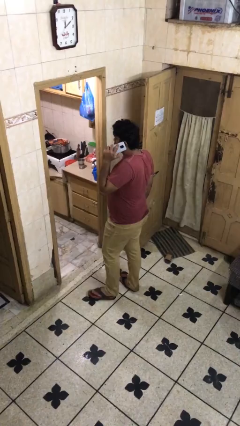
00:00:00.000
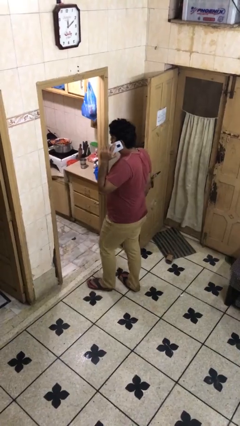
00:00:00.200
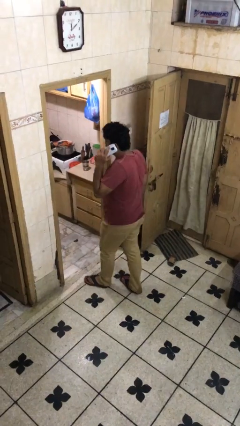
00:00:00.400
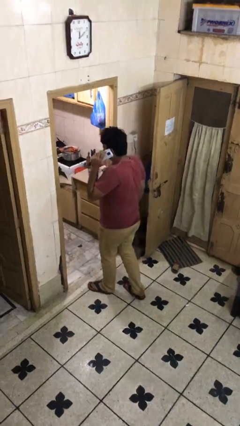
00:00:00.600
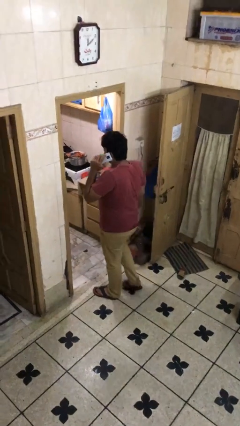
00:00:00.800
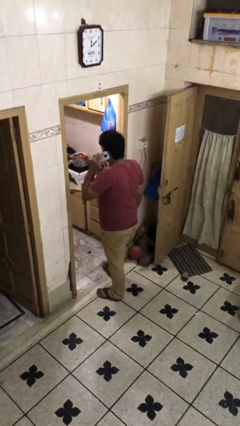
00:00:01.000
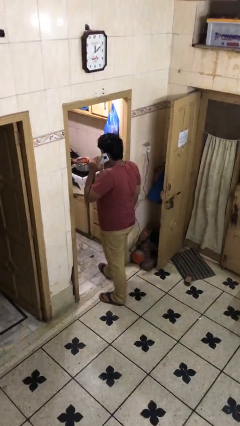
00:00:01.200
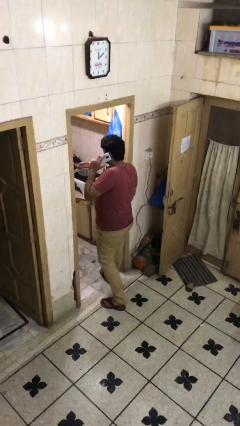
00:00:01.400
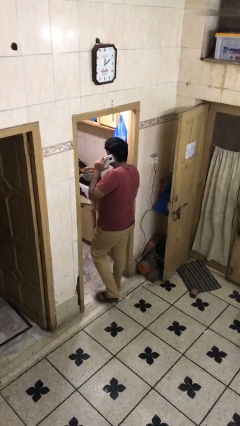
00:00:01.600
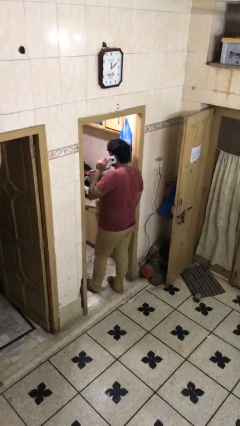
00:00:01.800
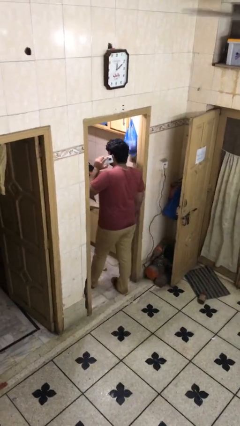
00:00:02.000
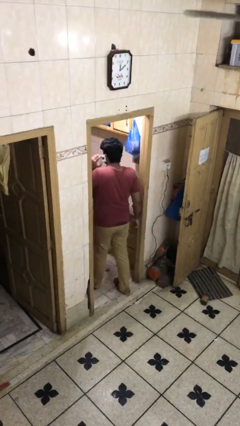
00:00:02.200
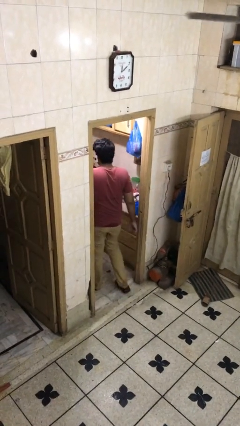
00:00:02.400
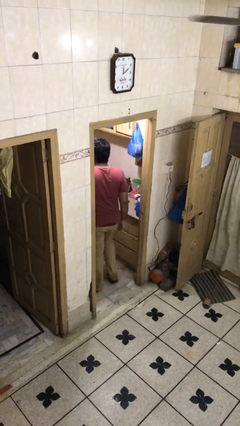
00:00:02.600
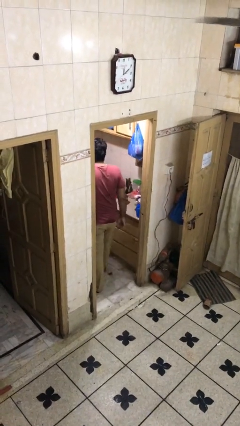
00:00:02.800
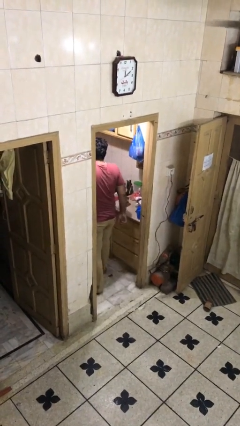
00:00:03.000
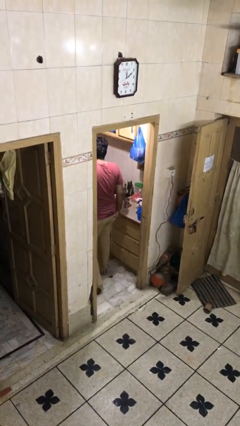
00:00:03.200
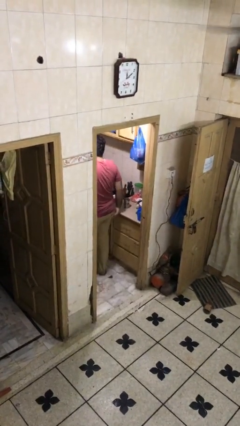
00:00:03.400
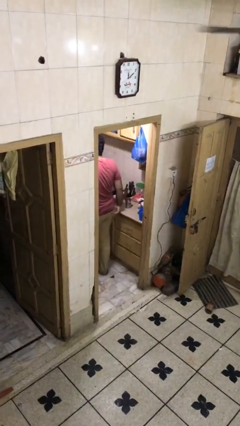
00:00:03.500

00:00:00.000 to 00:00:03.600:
person exits scene through structure

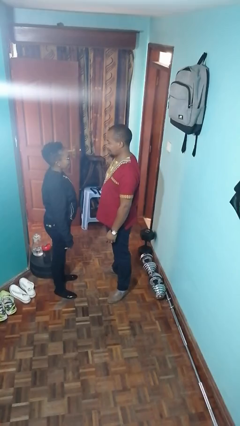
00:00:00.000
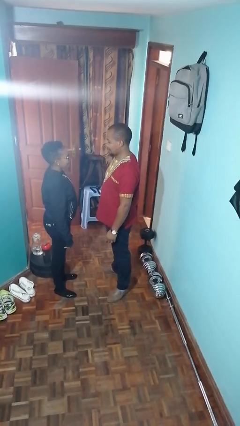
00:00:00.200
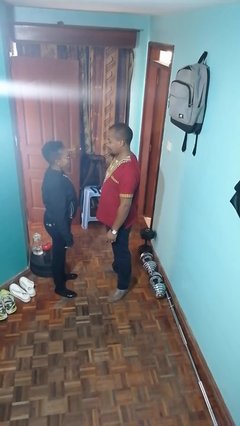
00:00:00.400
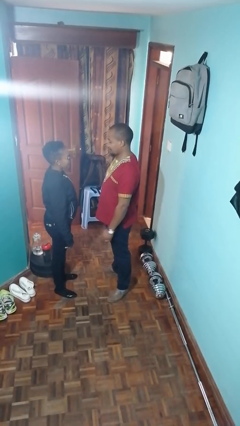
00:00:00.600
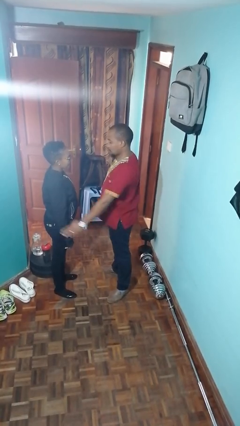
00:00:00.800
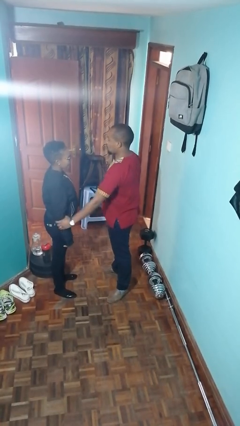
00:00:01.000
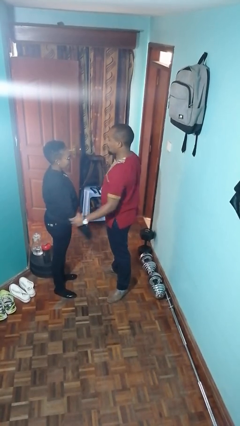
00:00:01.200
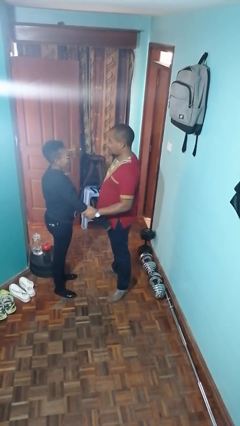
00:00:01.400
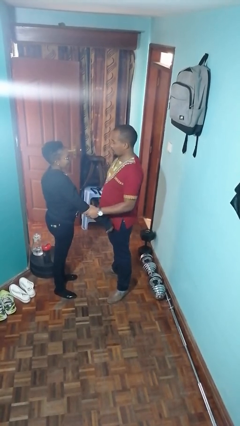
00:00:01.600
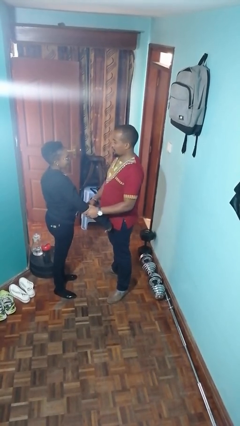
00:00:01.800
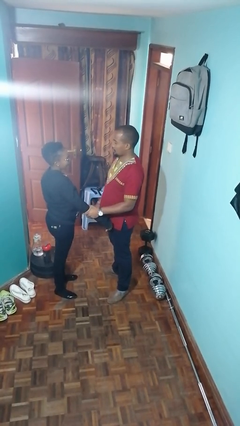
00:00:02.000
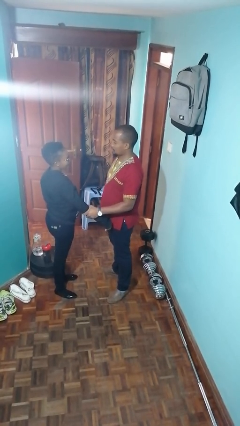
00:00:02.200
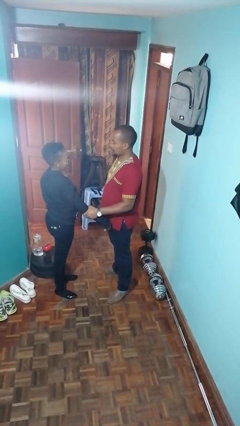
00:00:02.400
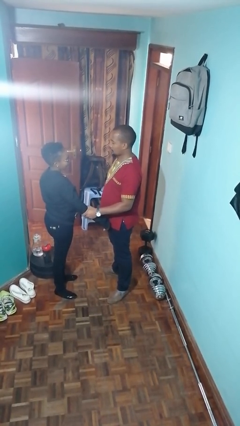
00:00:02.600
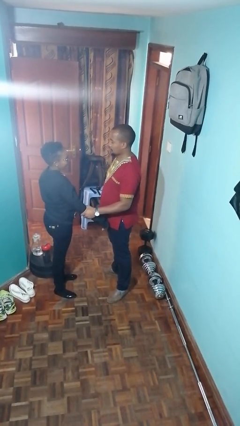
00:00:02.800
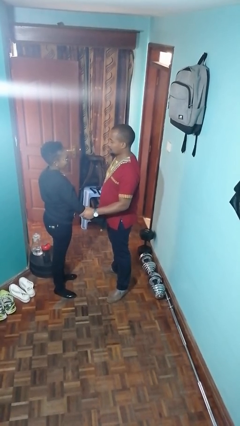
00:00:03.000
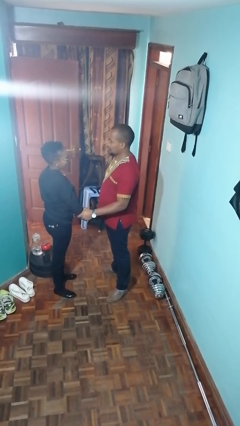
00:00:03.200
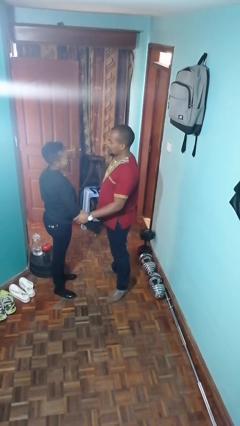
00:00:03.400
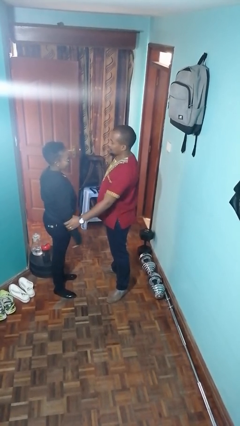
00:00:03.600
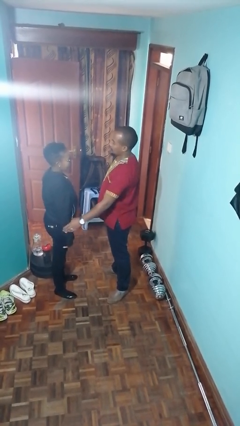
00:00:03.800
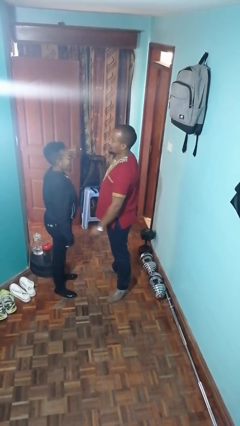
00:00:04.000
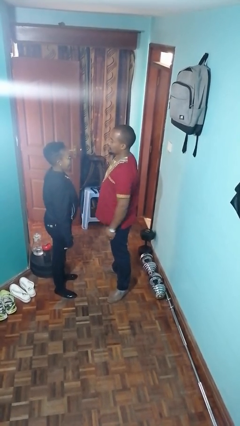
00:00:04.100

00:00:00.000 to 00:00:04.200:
person grabs person by forearm

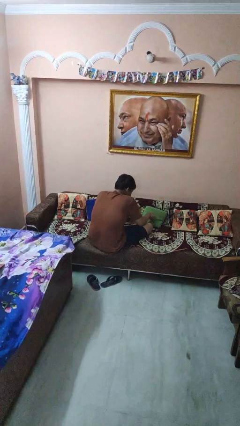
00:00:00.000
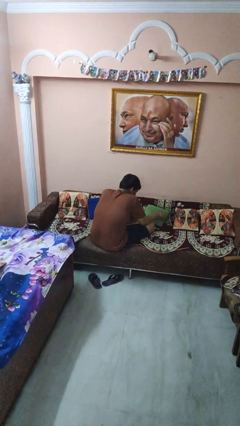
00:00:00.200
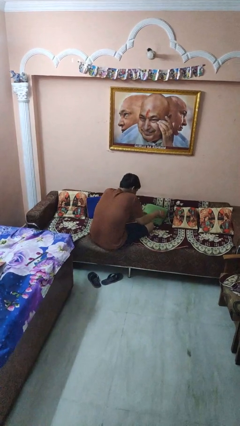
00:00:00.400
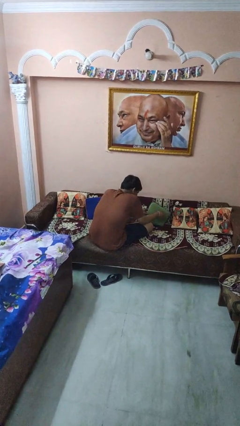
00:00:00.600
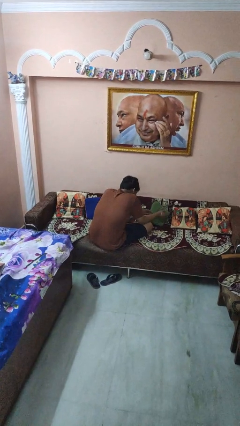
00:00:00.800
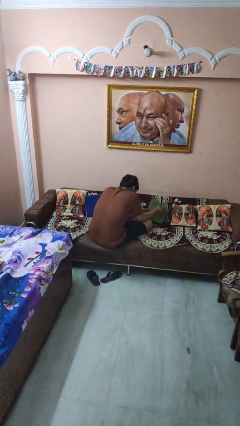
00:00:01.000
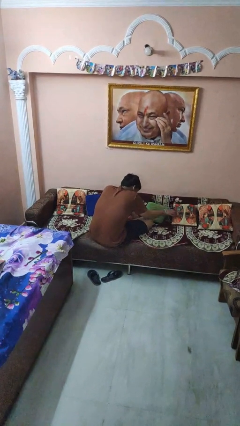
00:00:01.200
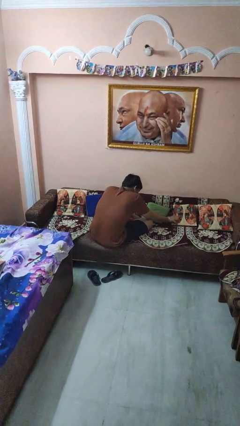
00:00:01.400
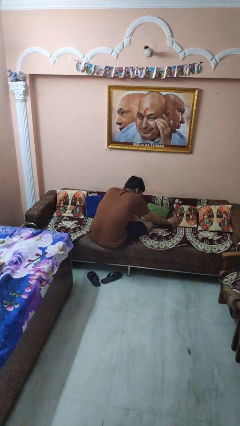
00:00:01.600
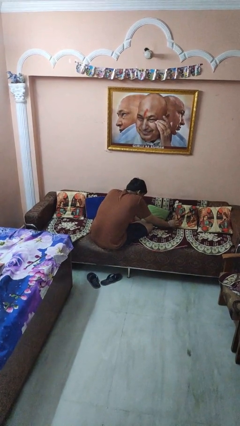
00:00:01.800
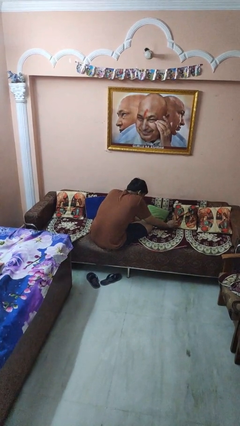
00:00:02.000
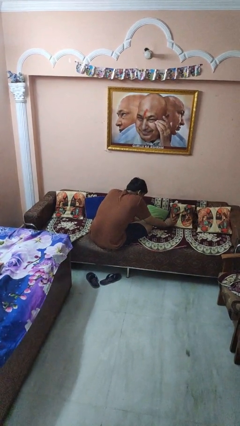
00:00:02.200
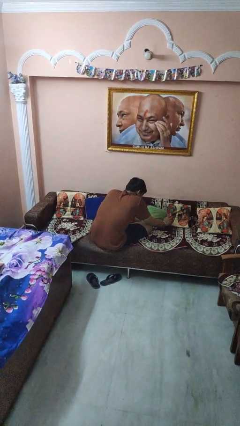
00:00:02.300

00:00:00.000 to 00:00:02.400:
person searches in couch

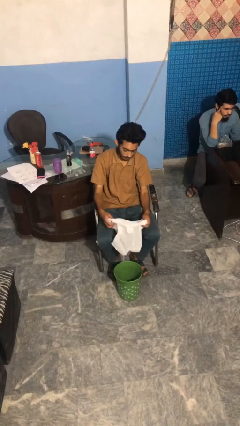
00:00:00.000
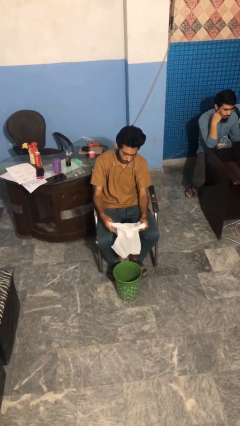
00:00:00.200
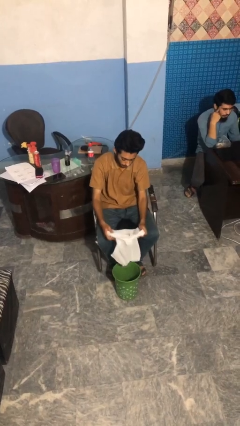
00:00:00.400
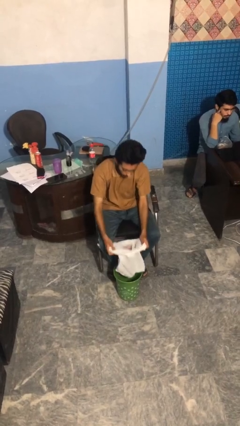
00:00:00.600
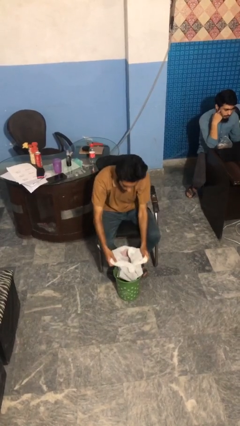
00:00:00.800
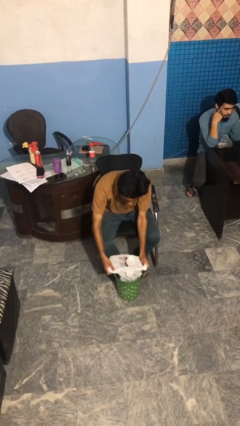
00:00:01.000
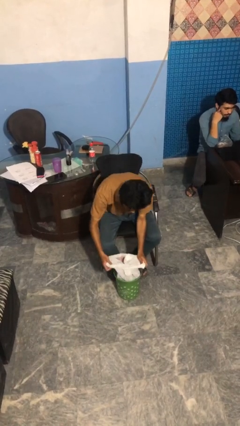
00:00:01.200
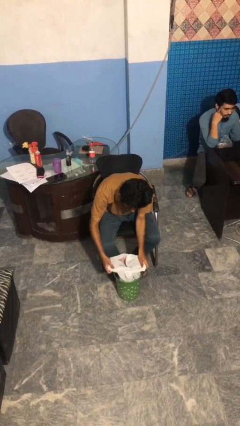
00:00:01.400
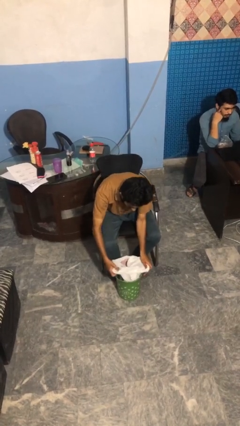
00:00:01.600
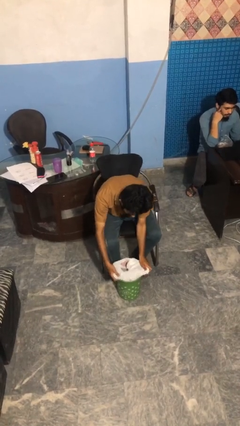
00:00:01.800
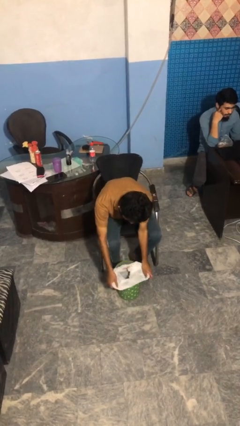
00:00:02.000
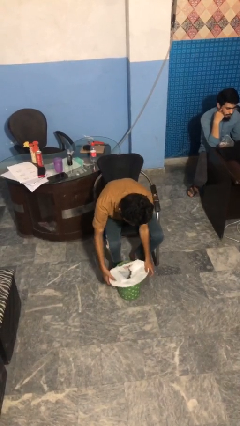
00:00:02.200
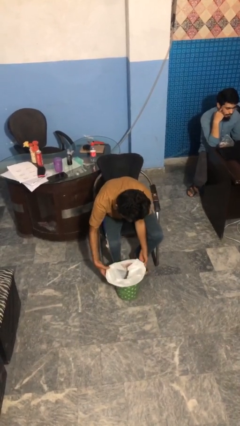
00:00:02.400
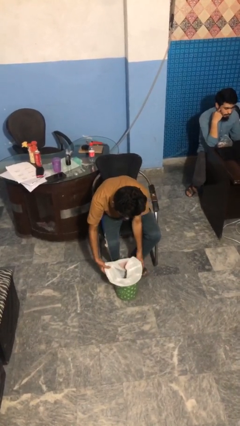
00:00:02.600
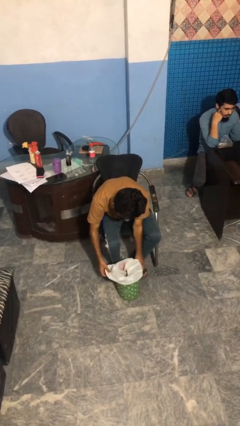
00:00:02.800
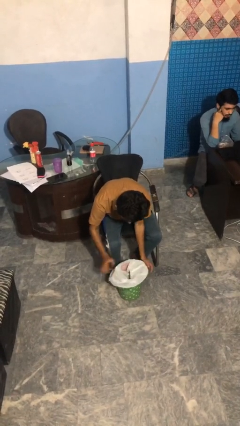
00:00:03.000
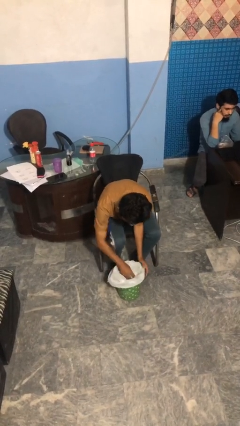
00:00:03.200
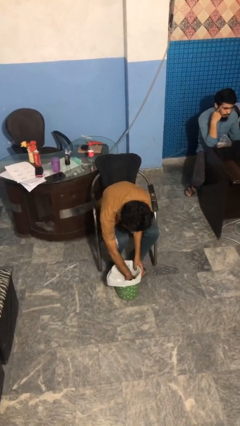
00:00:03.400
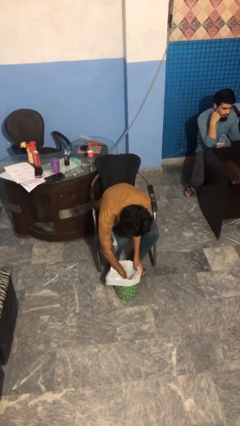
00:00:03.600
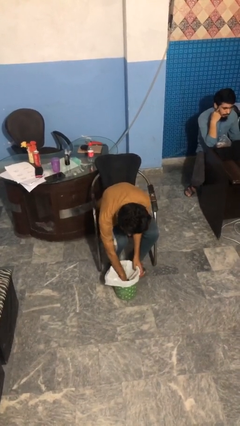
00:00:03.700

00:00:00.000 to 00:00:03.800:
person inserts trashbag into trashcan

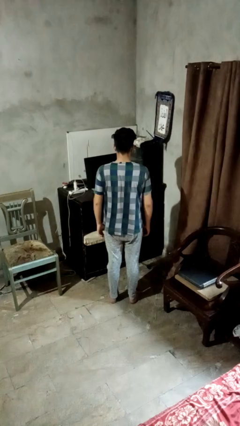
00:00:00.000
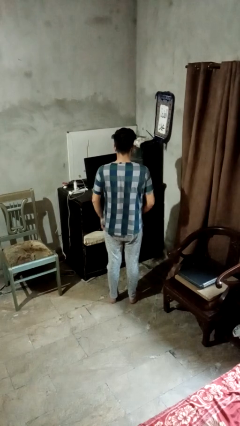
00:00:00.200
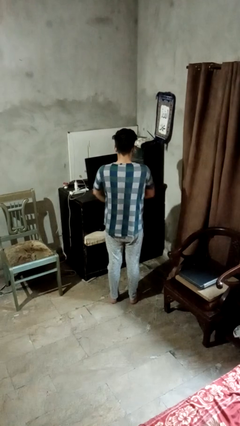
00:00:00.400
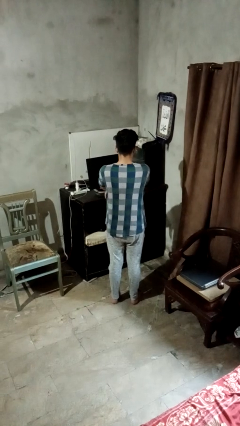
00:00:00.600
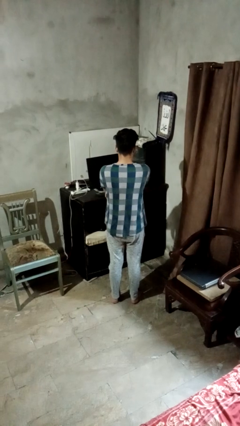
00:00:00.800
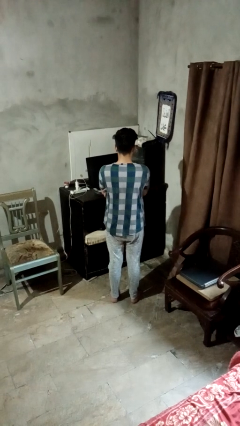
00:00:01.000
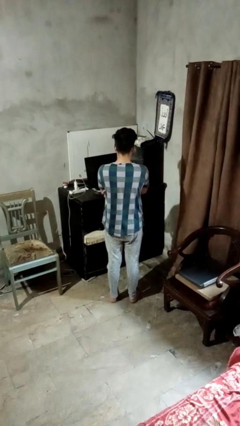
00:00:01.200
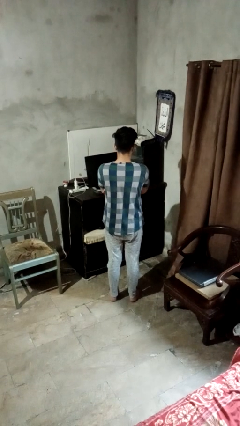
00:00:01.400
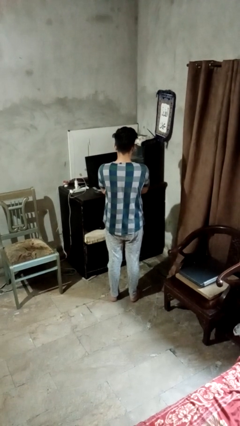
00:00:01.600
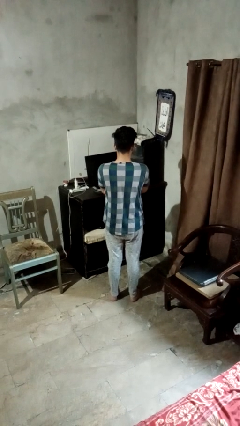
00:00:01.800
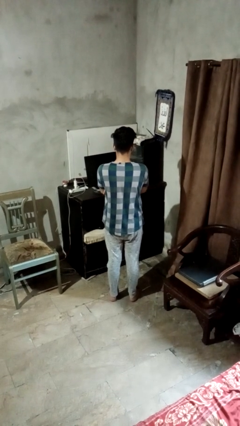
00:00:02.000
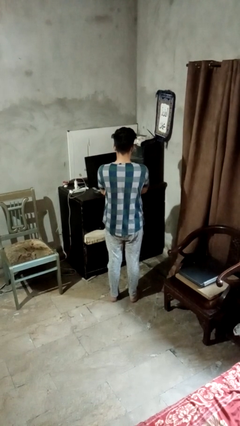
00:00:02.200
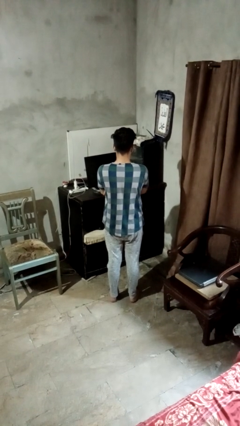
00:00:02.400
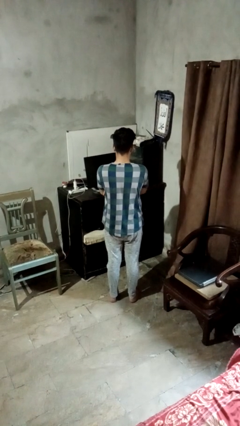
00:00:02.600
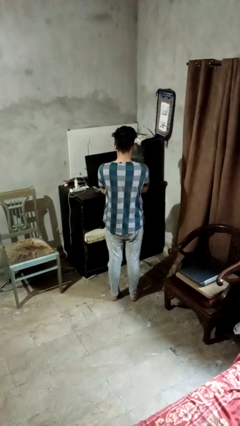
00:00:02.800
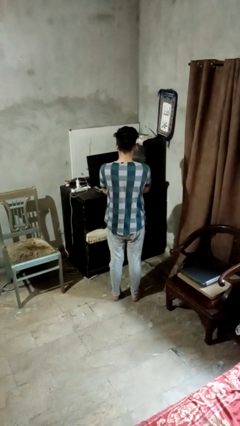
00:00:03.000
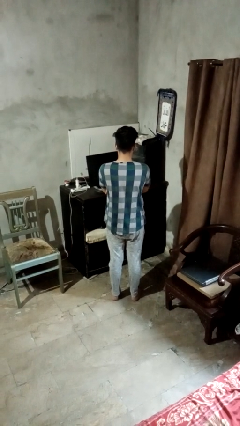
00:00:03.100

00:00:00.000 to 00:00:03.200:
person crosses arms

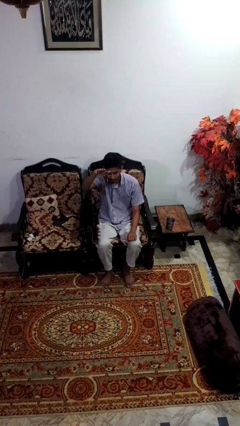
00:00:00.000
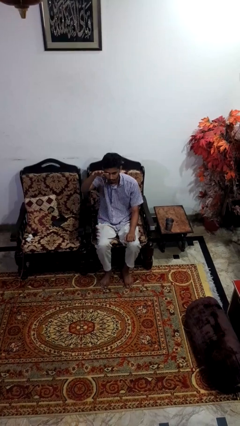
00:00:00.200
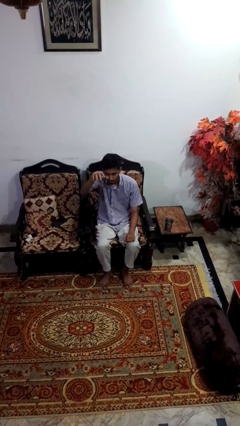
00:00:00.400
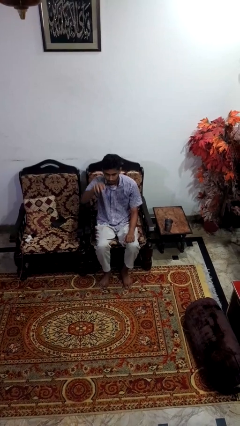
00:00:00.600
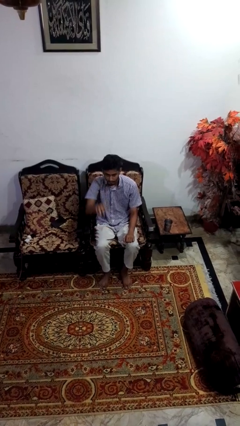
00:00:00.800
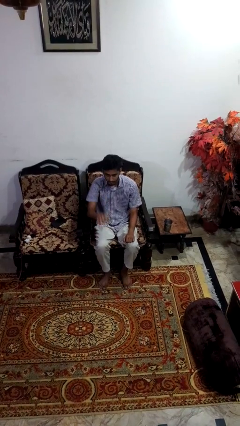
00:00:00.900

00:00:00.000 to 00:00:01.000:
person gestures swipe up
